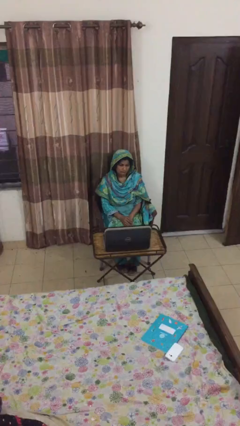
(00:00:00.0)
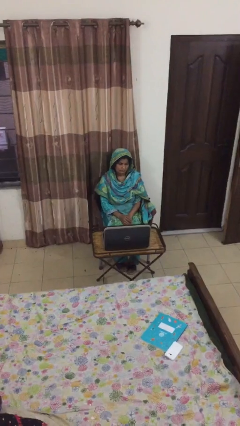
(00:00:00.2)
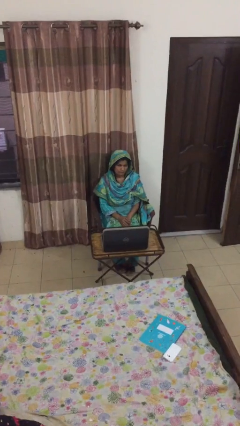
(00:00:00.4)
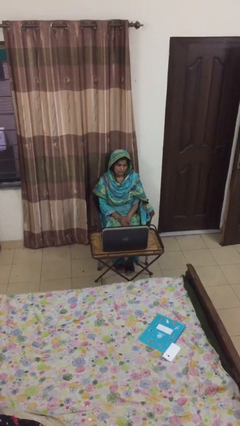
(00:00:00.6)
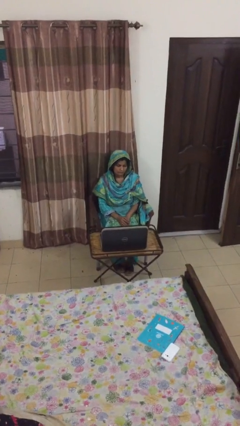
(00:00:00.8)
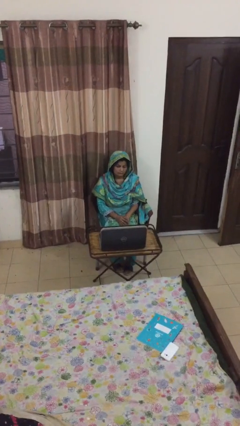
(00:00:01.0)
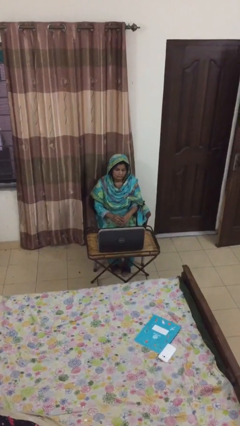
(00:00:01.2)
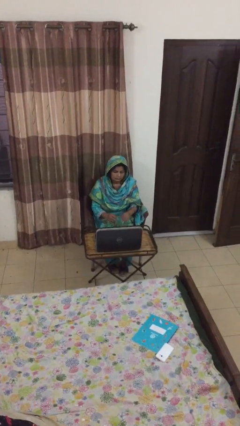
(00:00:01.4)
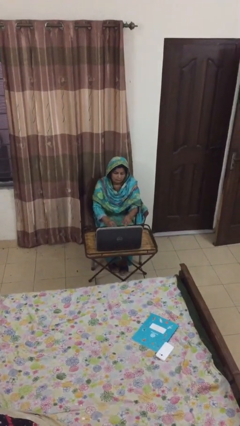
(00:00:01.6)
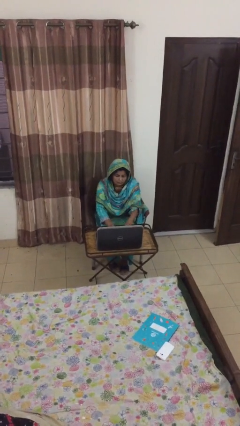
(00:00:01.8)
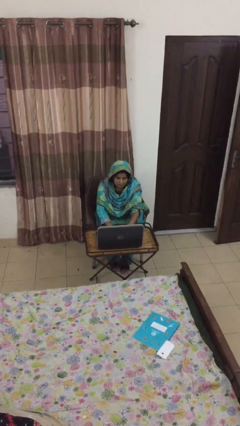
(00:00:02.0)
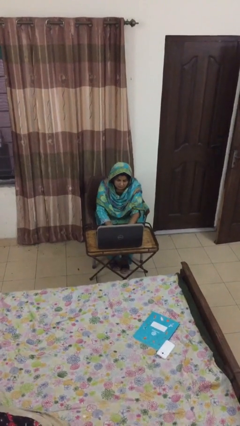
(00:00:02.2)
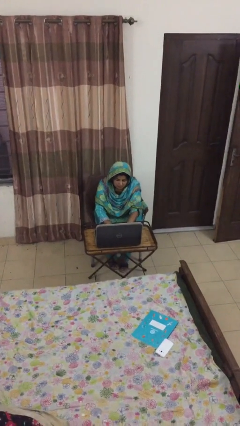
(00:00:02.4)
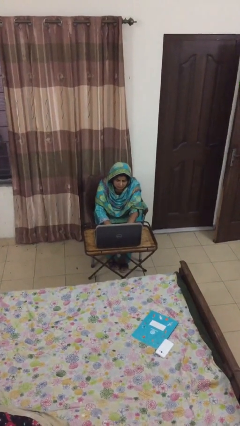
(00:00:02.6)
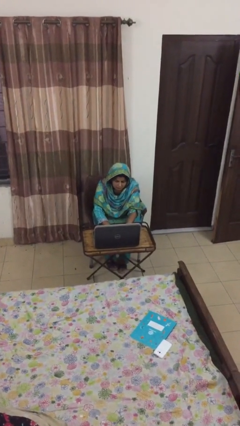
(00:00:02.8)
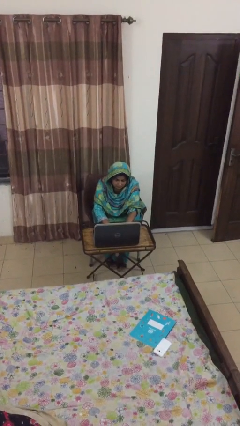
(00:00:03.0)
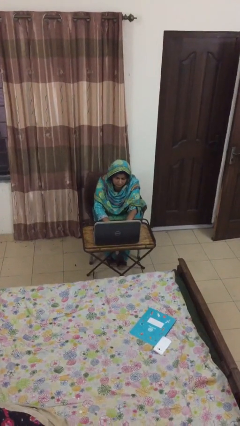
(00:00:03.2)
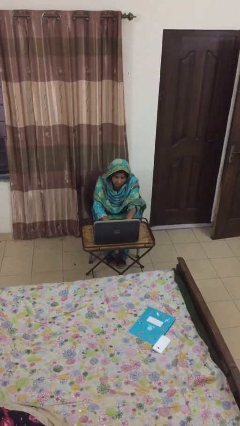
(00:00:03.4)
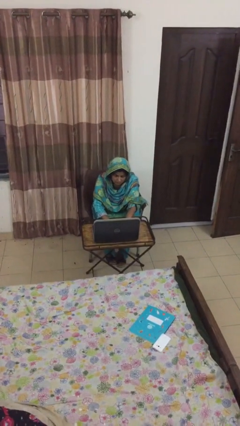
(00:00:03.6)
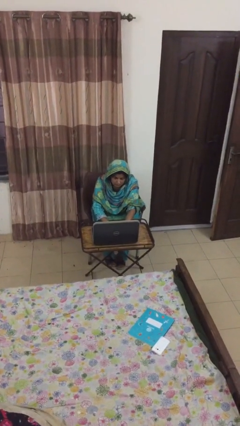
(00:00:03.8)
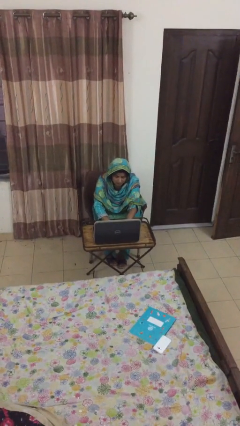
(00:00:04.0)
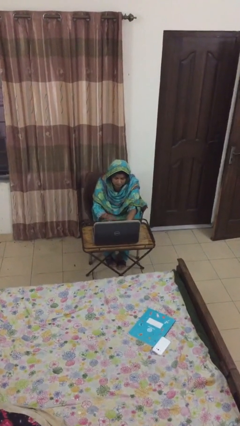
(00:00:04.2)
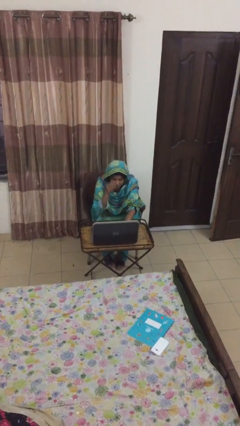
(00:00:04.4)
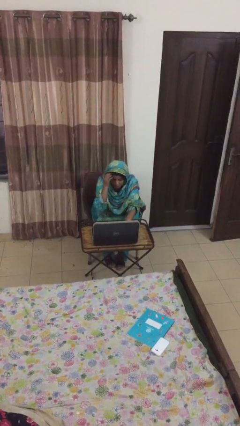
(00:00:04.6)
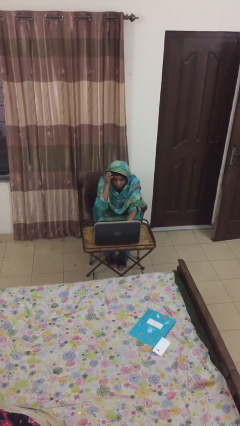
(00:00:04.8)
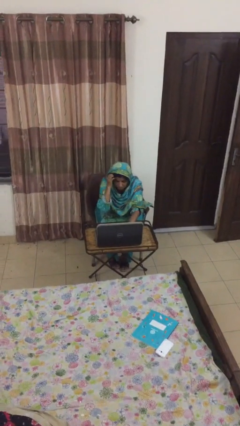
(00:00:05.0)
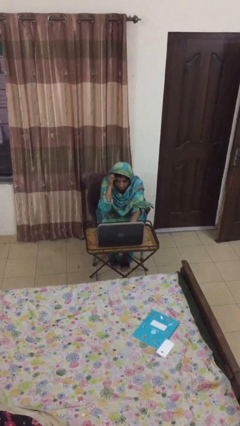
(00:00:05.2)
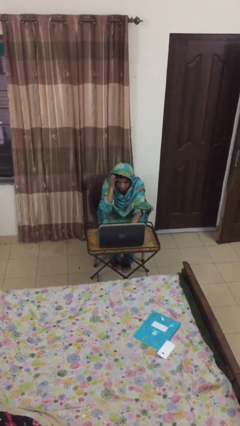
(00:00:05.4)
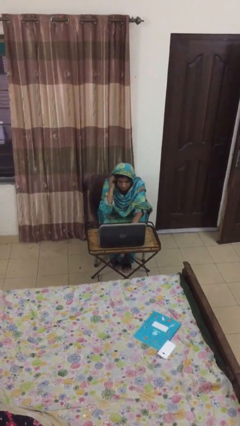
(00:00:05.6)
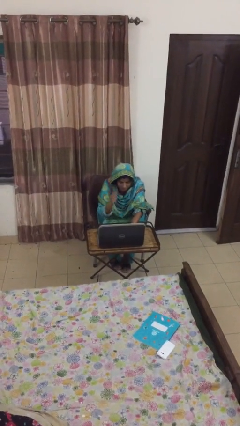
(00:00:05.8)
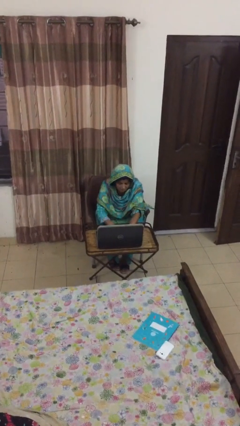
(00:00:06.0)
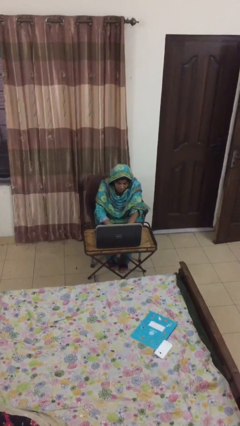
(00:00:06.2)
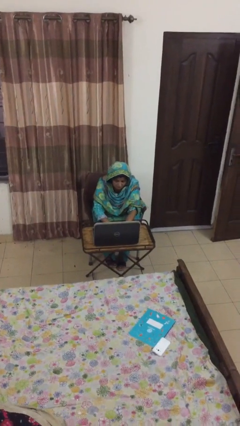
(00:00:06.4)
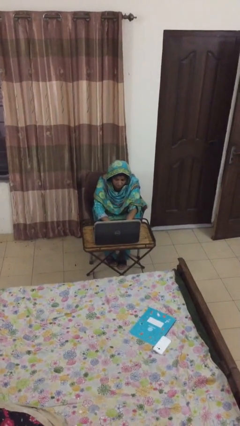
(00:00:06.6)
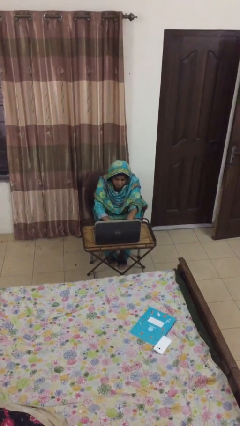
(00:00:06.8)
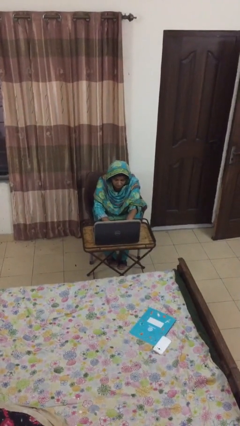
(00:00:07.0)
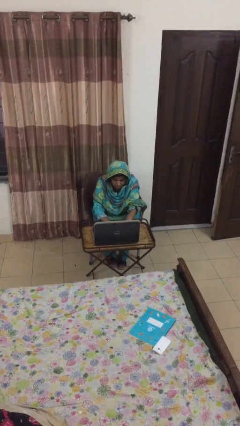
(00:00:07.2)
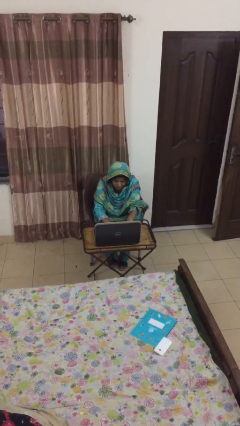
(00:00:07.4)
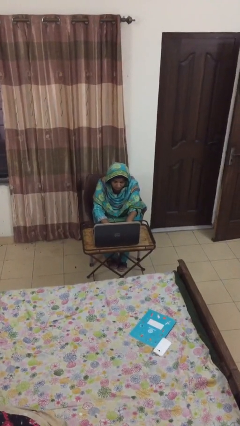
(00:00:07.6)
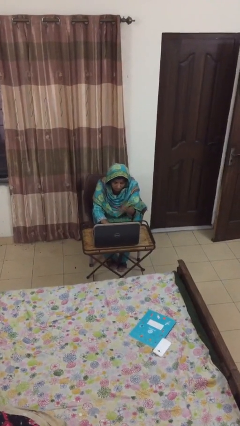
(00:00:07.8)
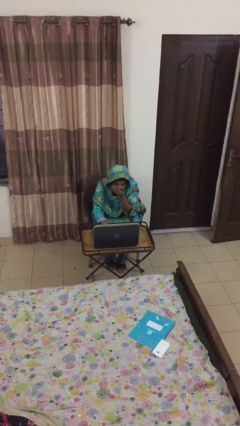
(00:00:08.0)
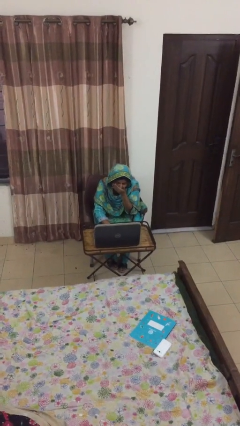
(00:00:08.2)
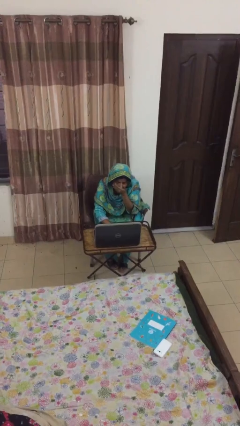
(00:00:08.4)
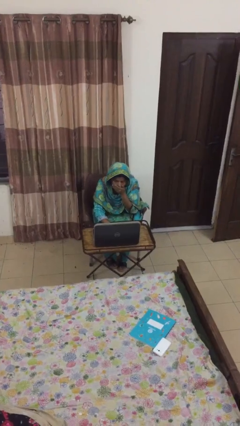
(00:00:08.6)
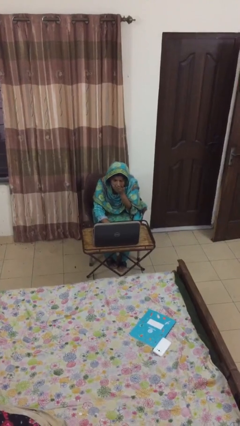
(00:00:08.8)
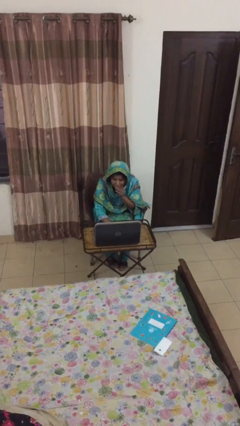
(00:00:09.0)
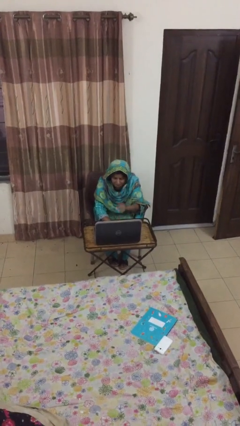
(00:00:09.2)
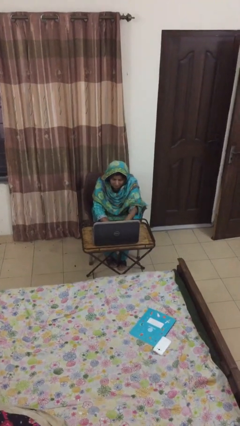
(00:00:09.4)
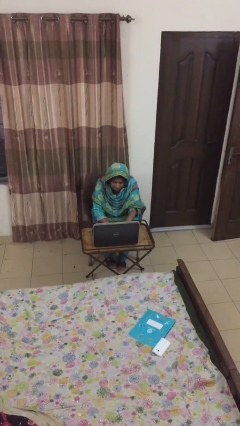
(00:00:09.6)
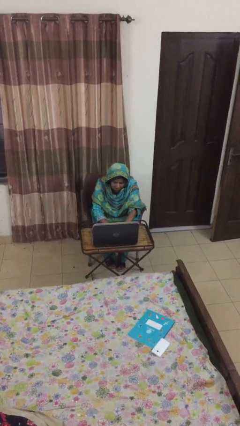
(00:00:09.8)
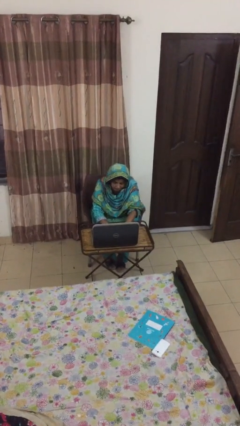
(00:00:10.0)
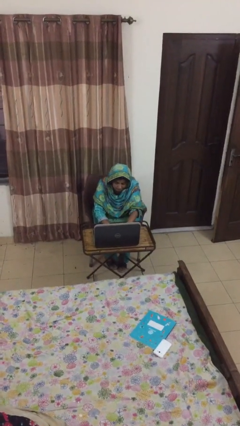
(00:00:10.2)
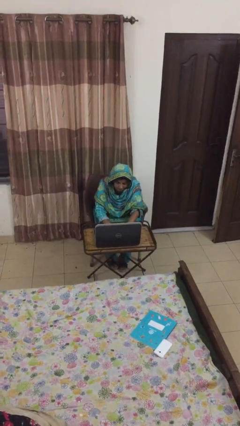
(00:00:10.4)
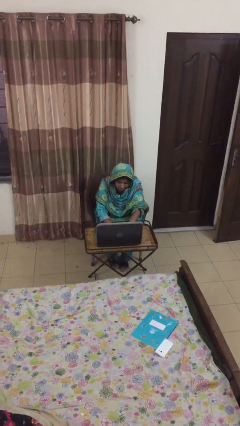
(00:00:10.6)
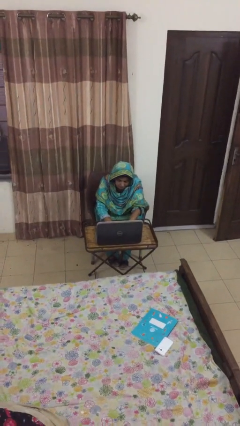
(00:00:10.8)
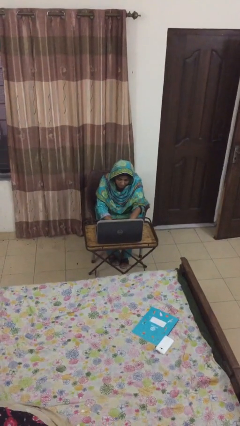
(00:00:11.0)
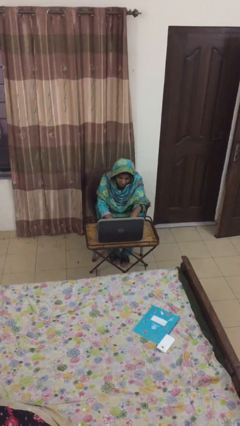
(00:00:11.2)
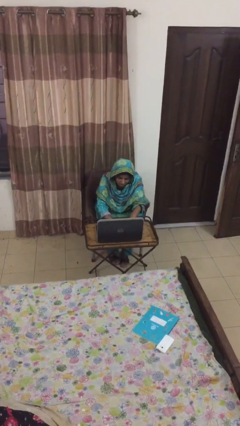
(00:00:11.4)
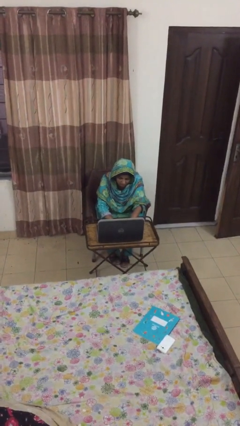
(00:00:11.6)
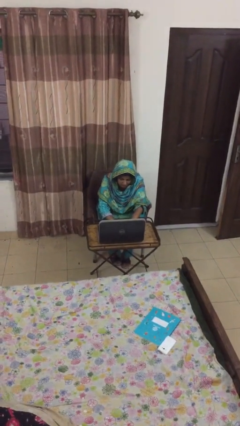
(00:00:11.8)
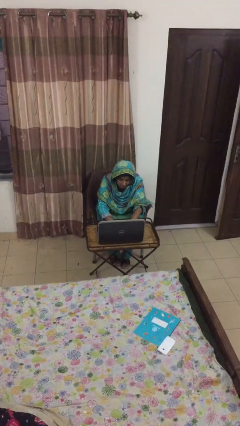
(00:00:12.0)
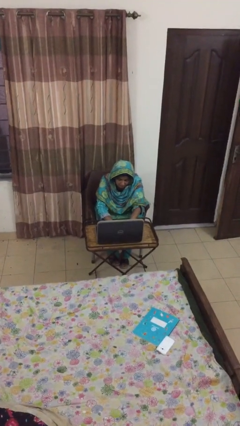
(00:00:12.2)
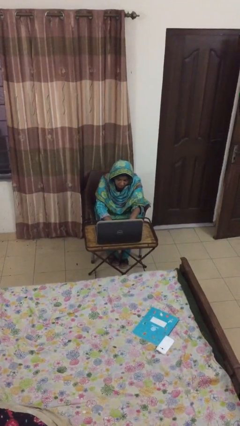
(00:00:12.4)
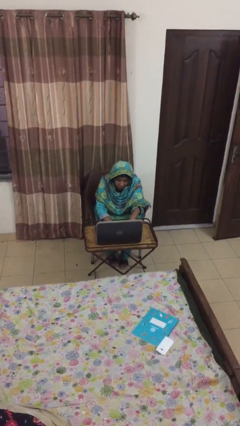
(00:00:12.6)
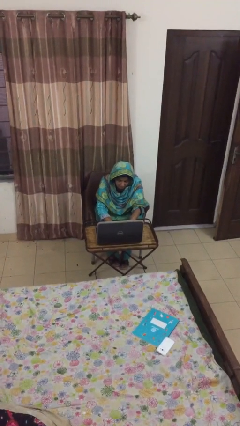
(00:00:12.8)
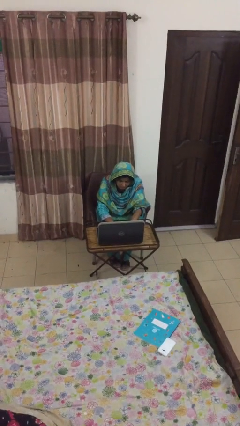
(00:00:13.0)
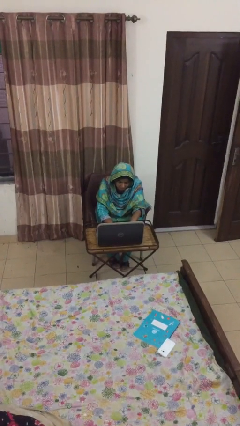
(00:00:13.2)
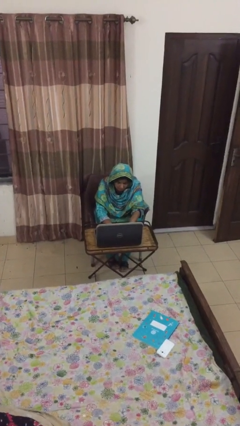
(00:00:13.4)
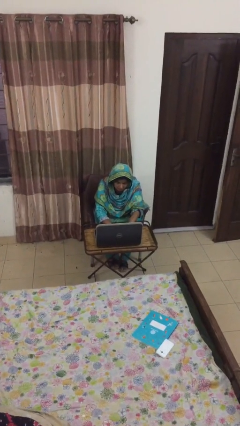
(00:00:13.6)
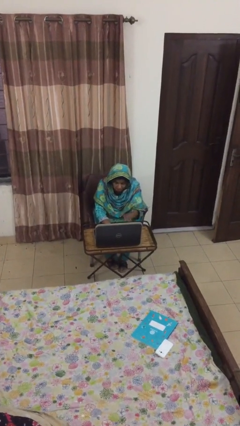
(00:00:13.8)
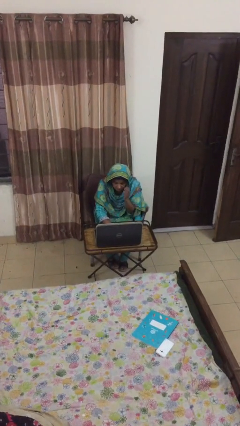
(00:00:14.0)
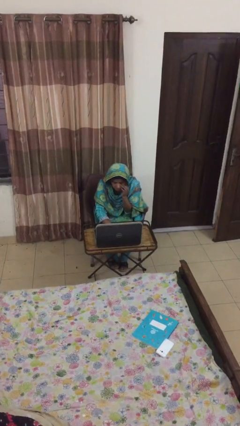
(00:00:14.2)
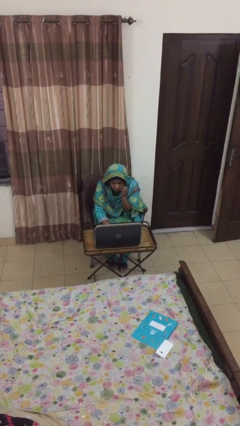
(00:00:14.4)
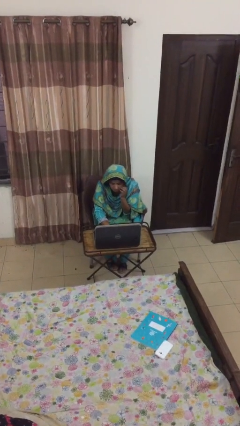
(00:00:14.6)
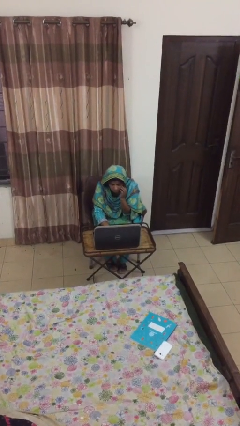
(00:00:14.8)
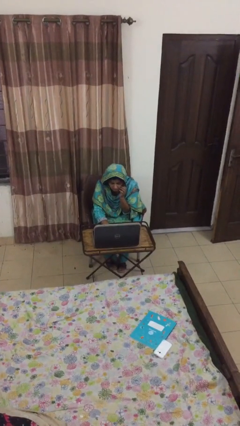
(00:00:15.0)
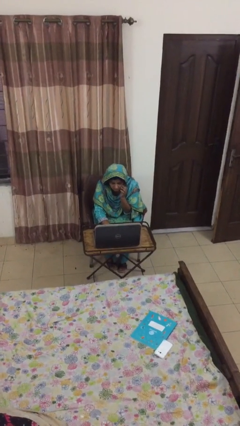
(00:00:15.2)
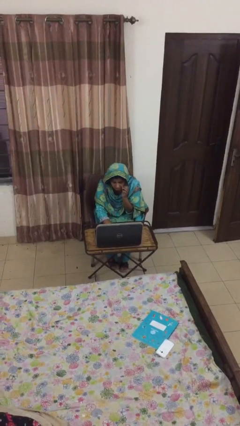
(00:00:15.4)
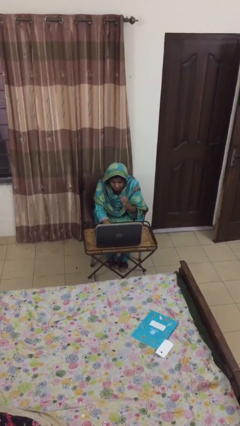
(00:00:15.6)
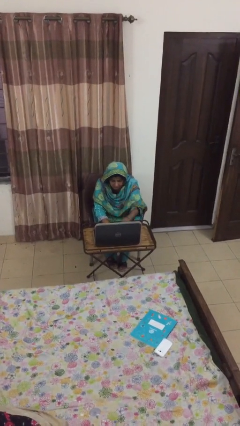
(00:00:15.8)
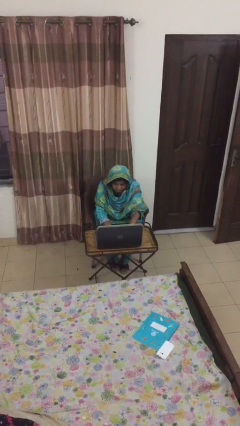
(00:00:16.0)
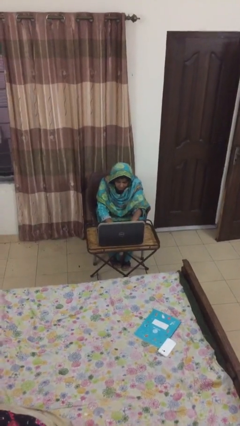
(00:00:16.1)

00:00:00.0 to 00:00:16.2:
person interacts with laptop

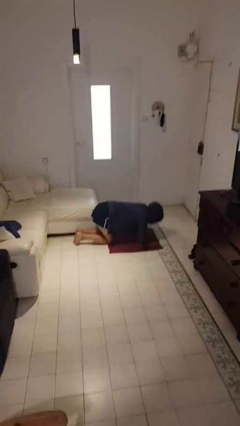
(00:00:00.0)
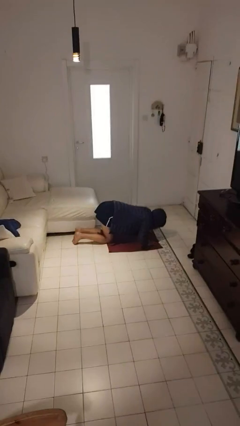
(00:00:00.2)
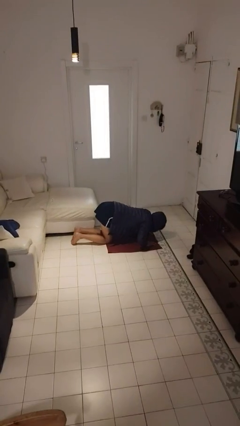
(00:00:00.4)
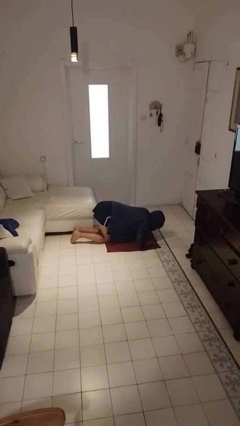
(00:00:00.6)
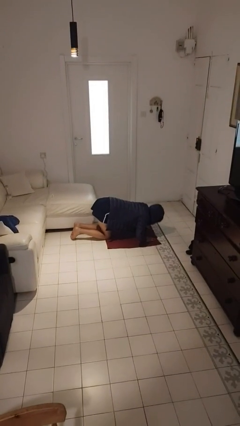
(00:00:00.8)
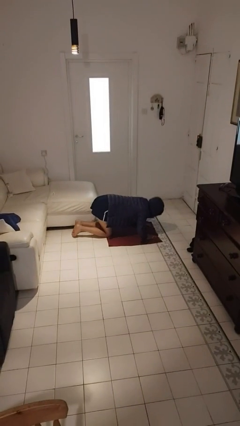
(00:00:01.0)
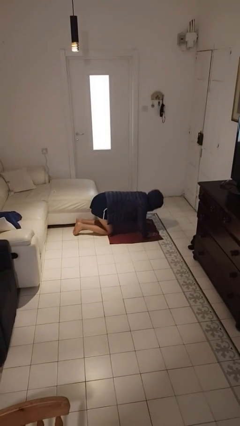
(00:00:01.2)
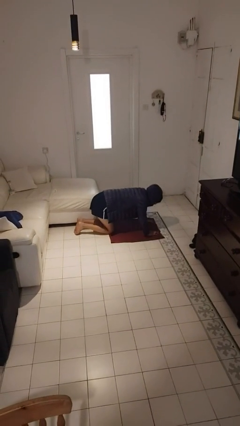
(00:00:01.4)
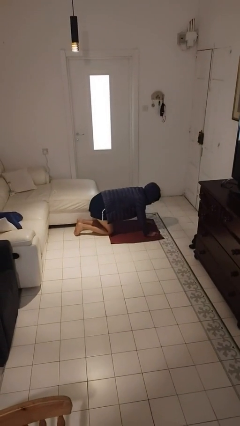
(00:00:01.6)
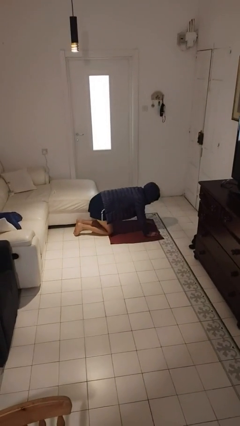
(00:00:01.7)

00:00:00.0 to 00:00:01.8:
person exercises with pushup
